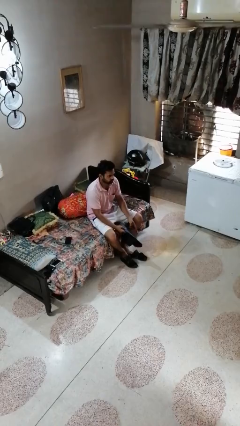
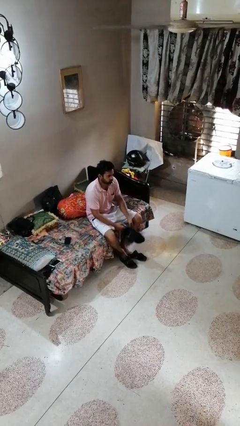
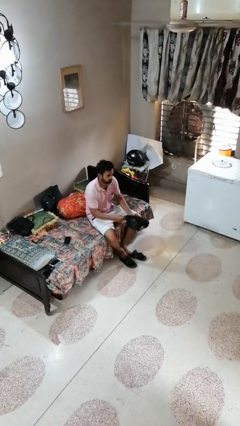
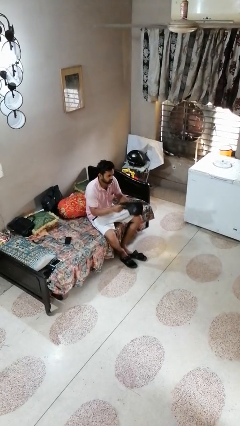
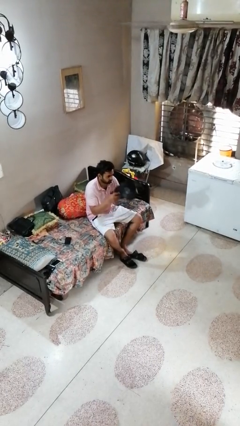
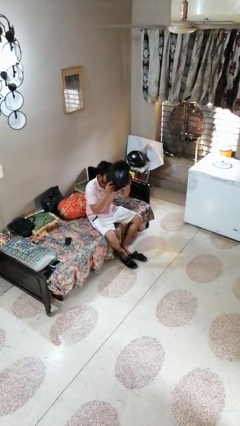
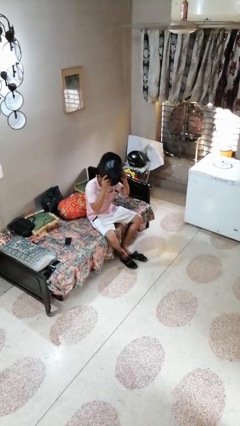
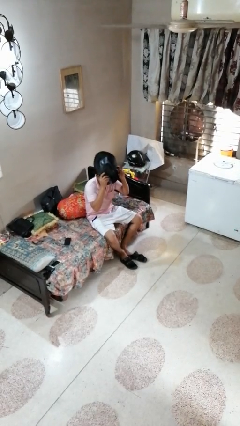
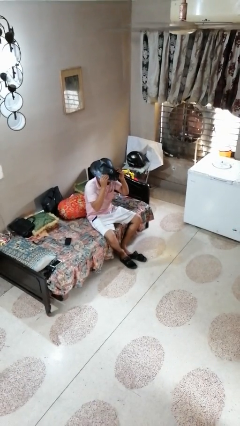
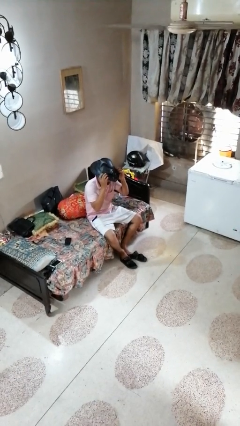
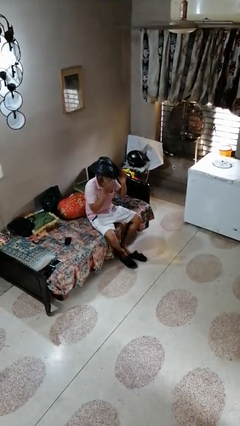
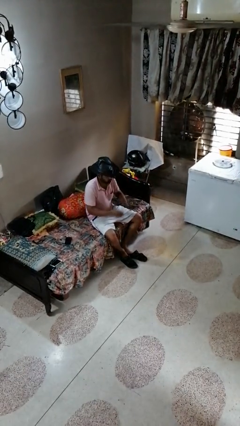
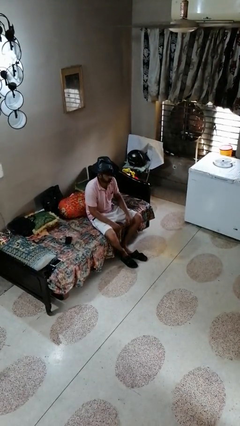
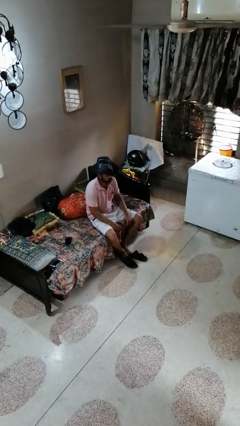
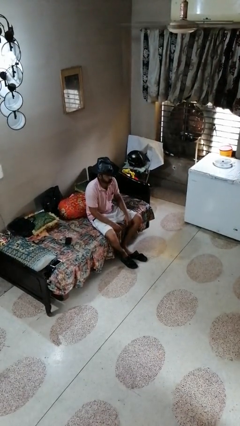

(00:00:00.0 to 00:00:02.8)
person puts on hat

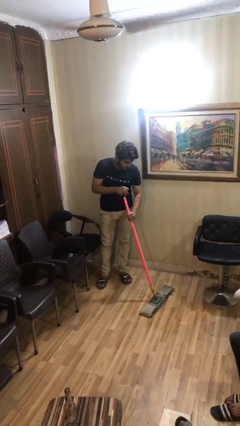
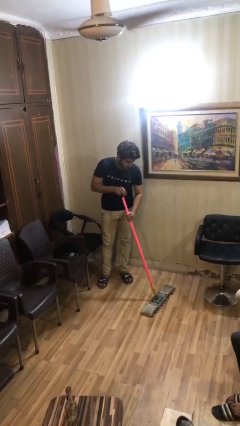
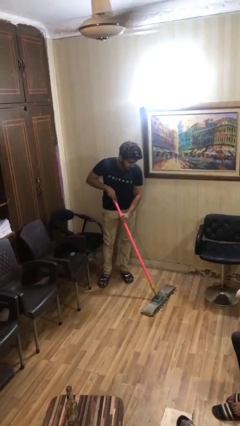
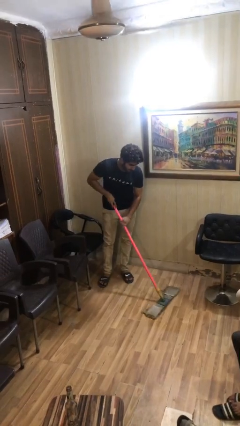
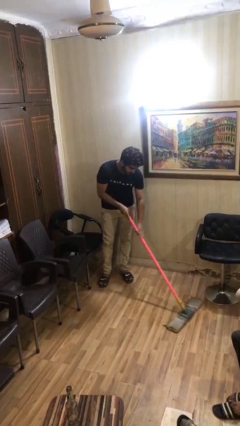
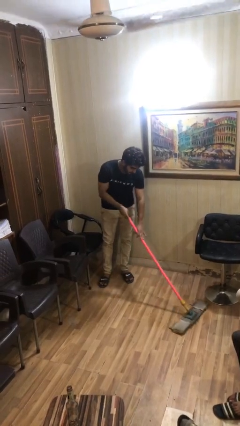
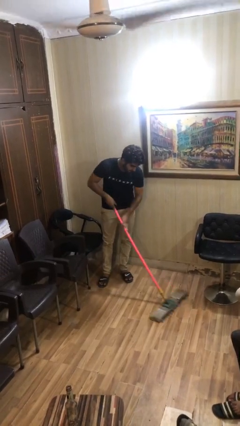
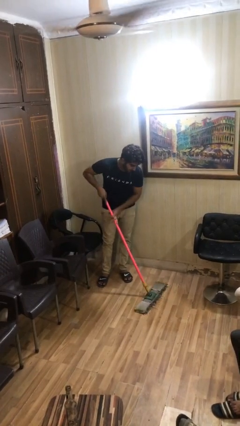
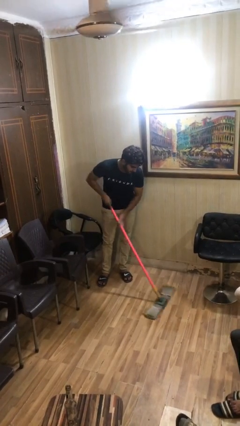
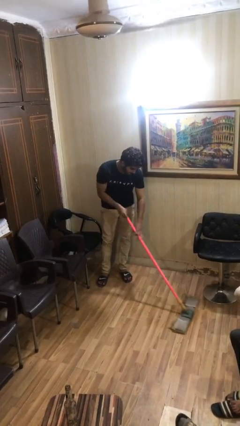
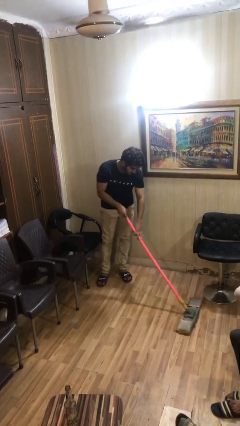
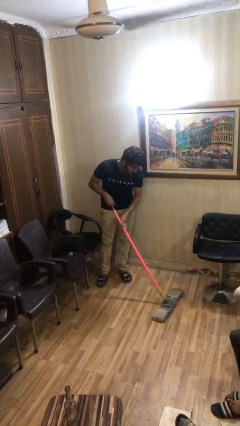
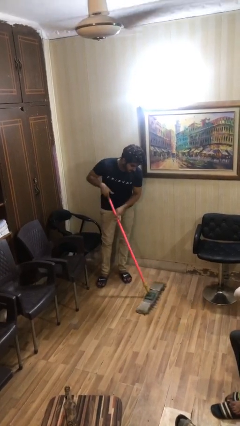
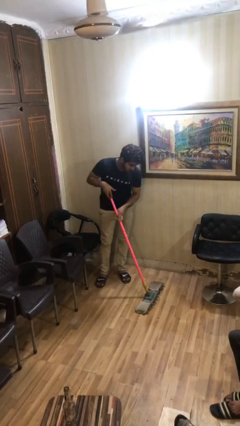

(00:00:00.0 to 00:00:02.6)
person sweeps floor

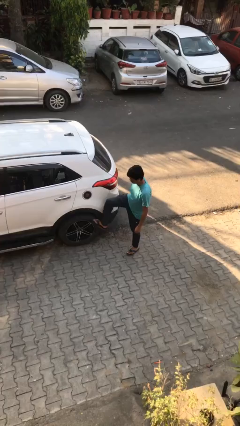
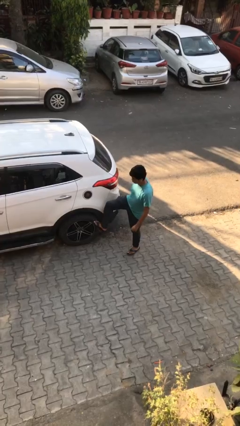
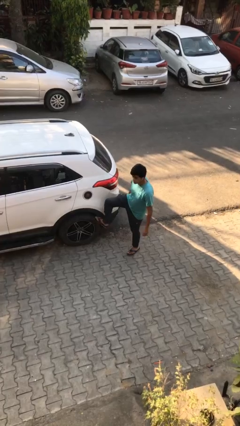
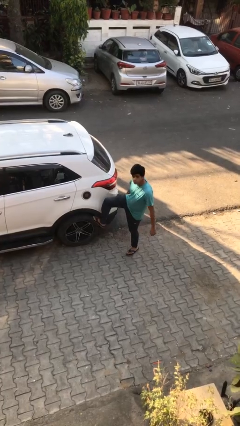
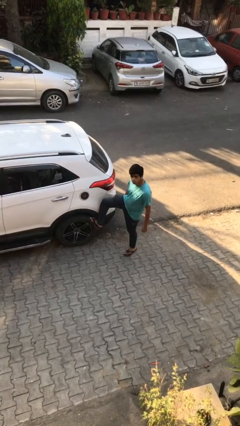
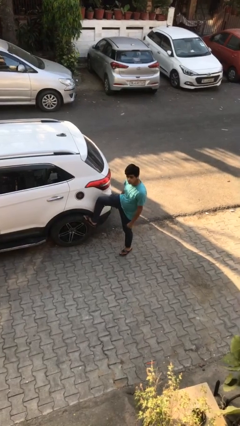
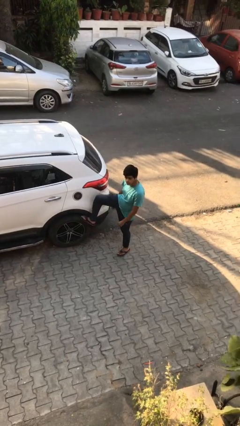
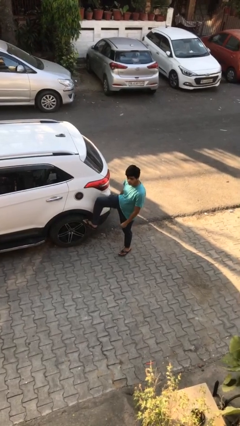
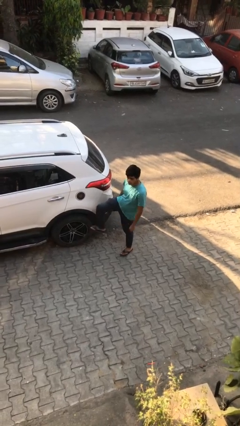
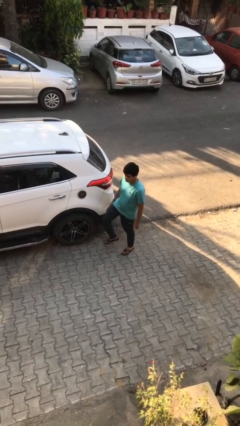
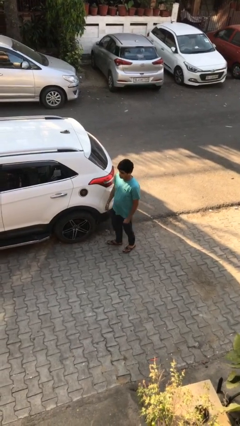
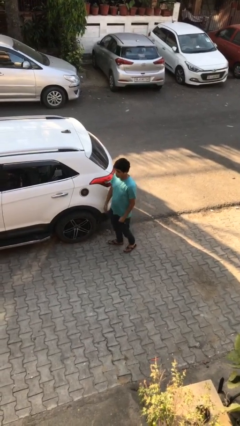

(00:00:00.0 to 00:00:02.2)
person kicks car tires

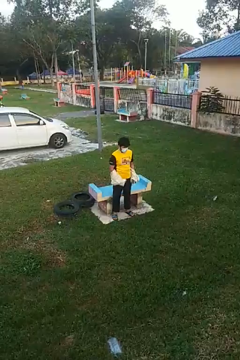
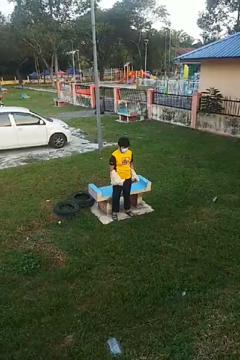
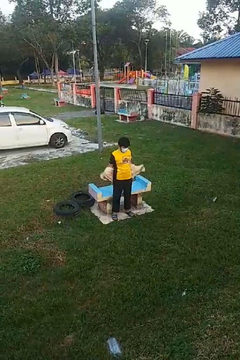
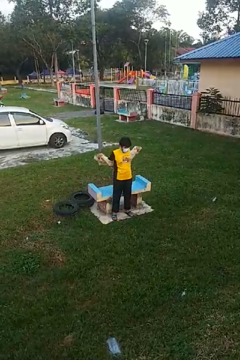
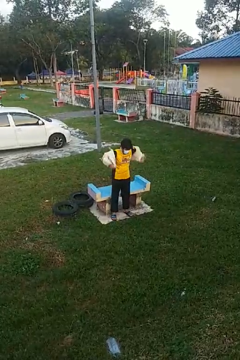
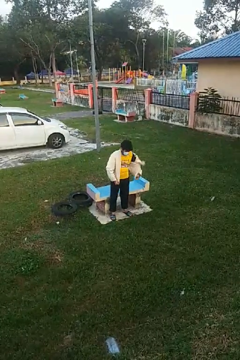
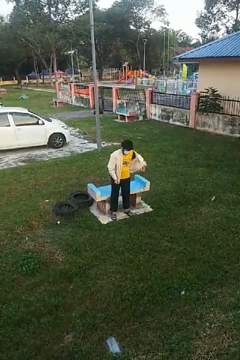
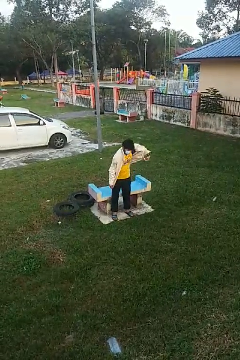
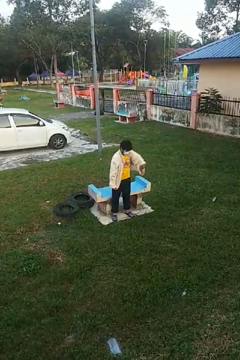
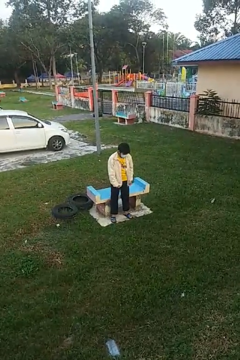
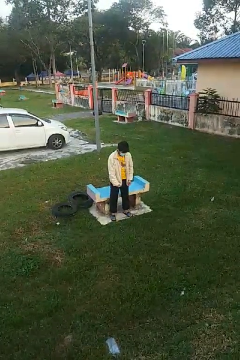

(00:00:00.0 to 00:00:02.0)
person puts on jacket

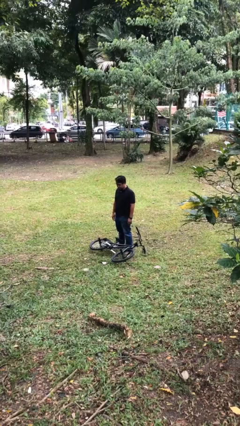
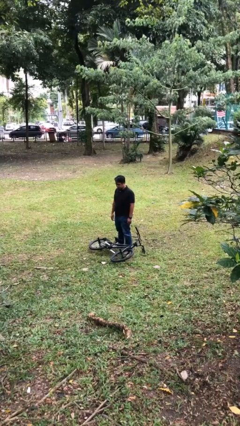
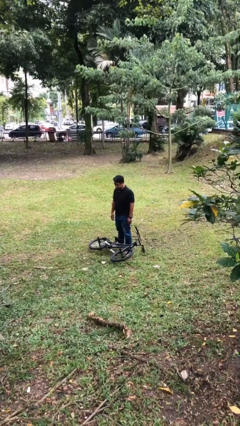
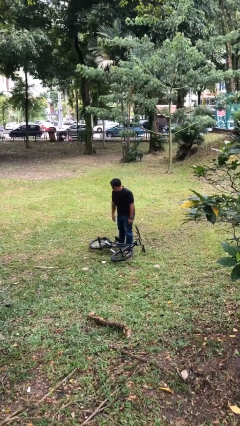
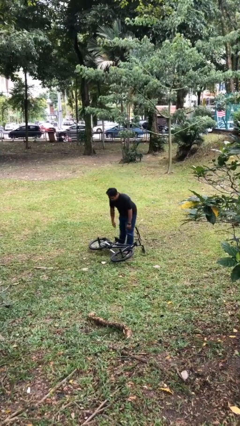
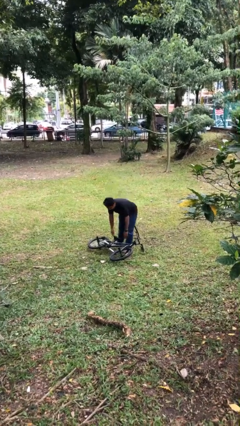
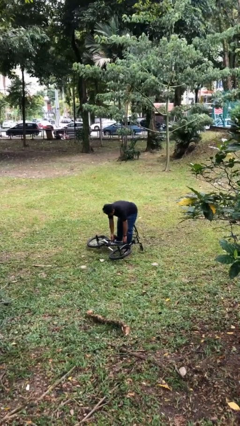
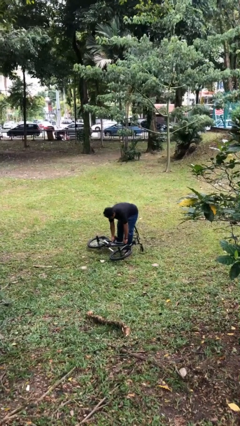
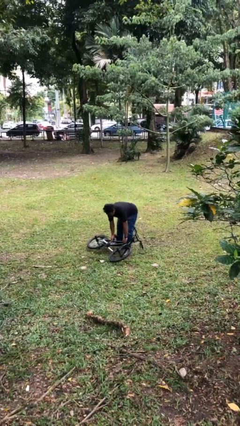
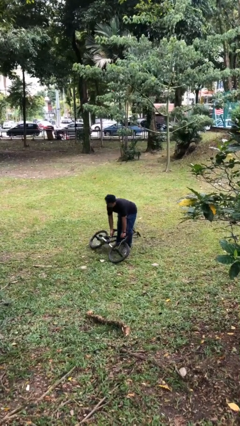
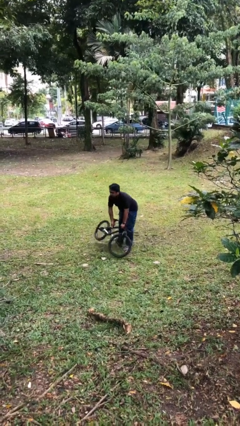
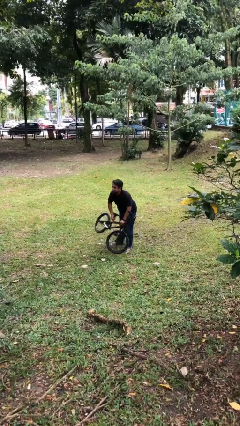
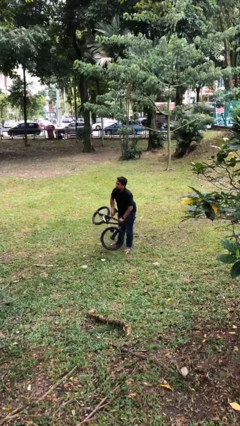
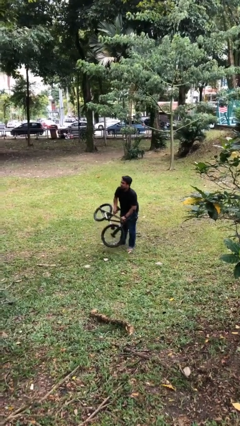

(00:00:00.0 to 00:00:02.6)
person picks up object from floor

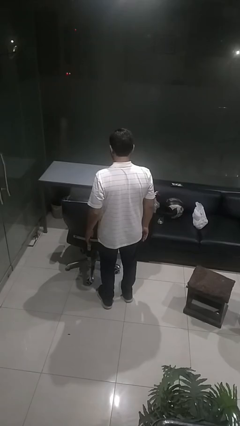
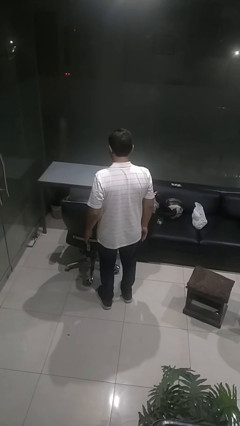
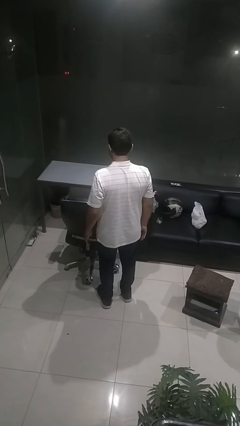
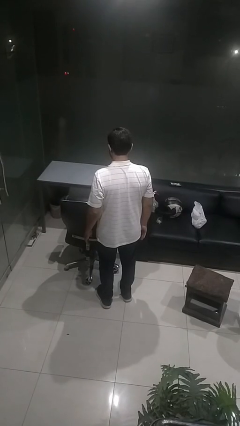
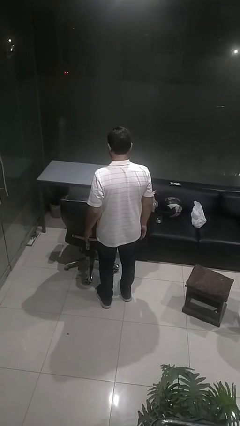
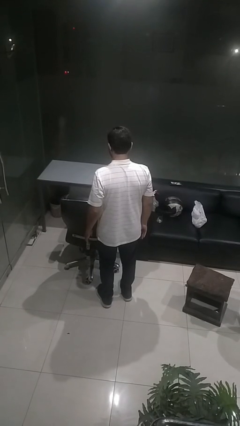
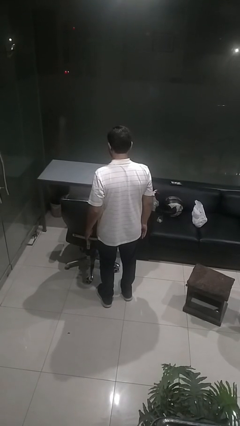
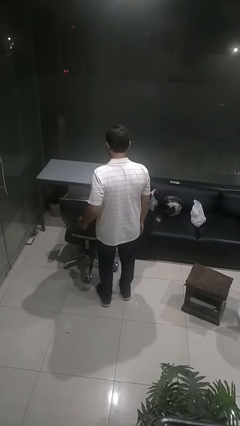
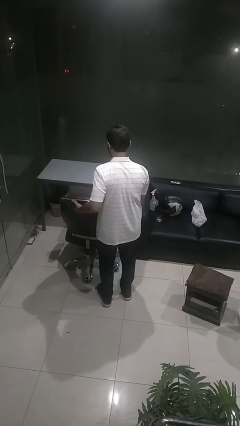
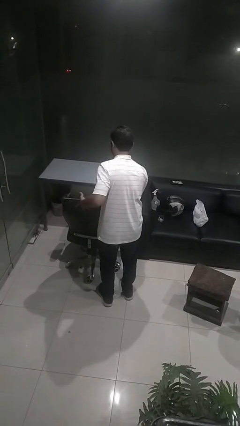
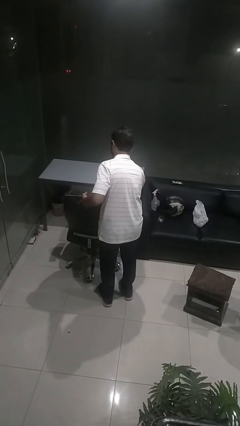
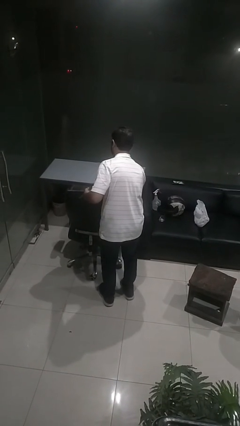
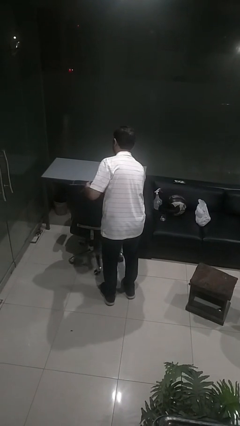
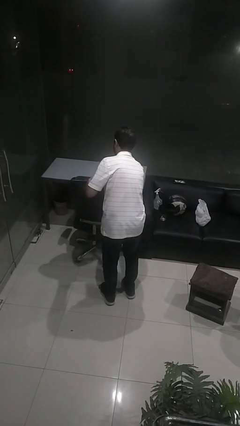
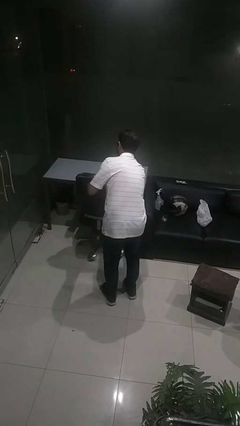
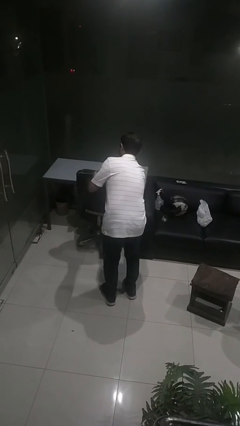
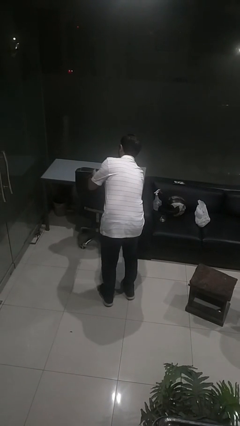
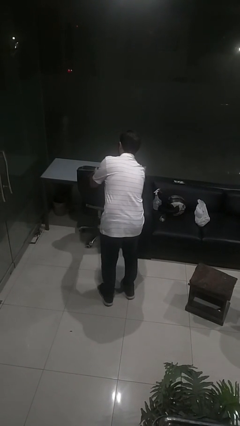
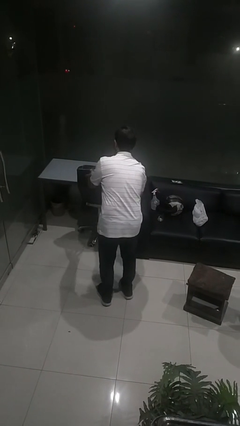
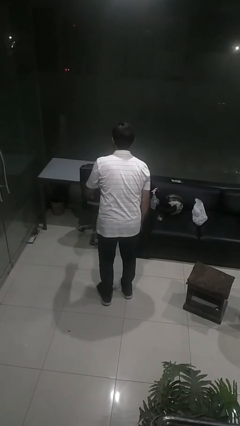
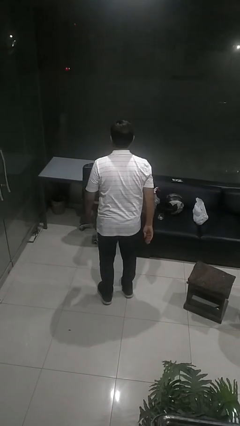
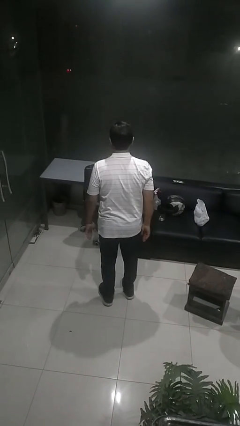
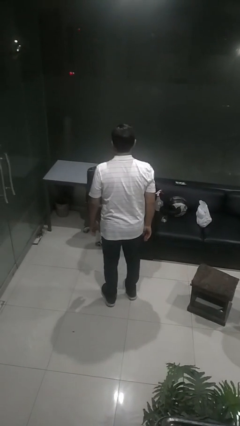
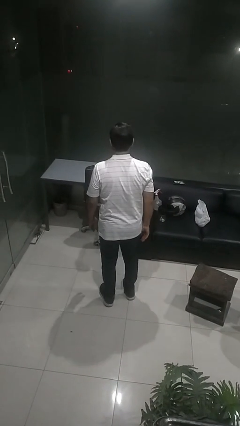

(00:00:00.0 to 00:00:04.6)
person pushes in chair

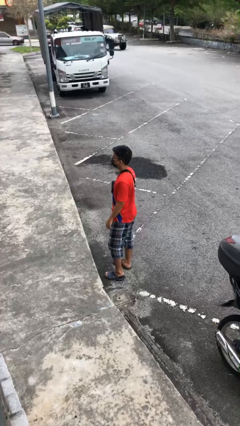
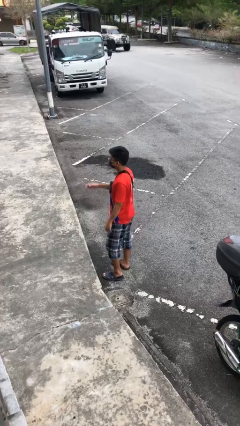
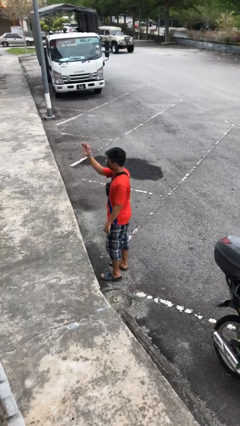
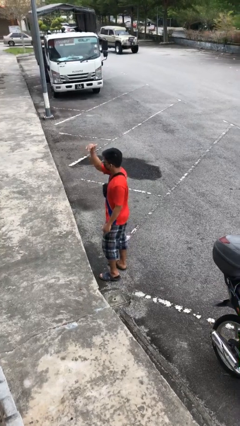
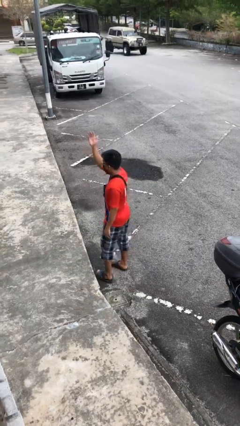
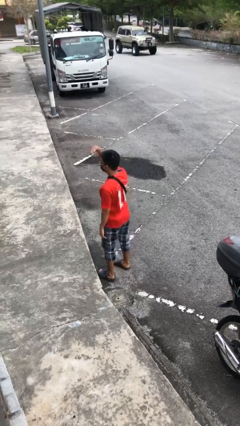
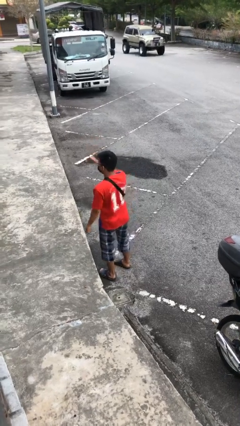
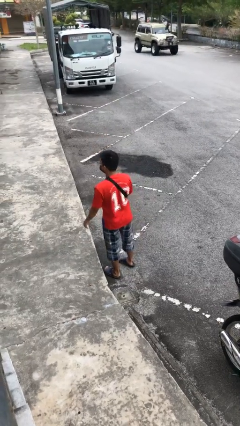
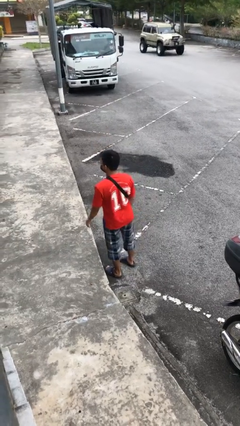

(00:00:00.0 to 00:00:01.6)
person gestures come here
